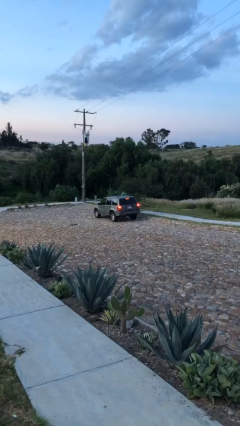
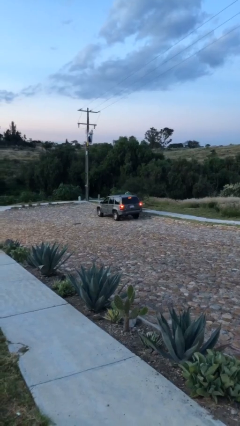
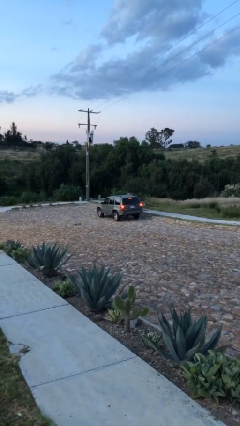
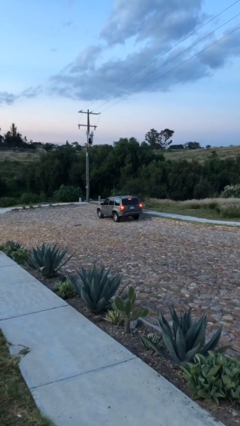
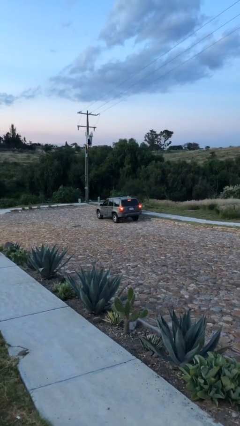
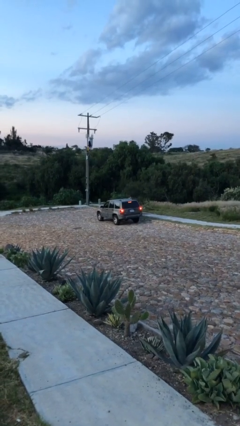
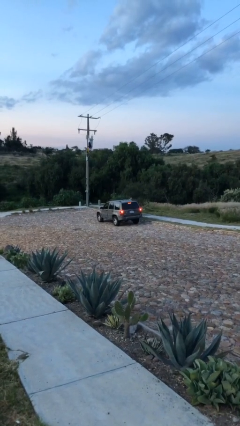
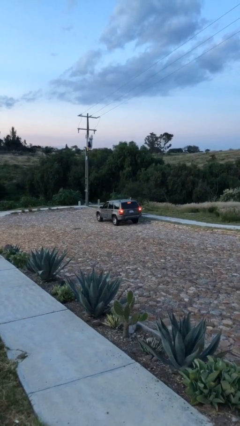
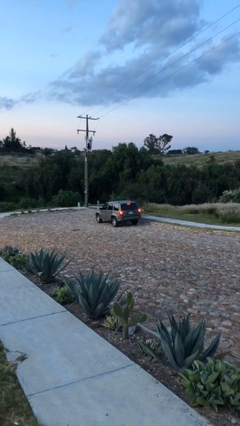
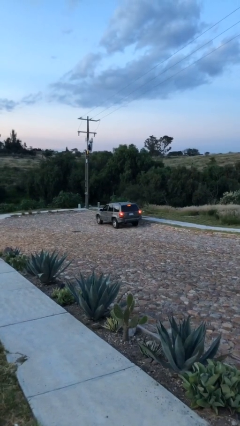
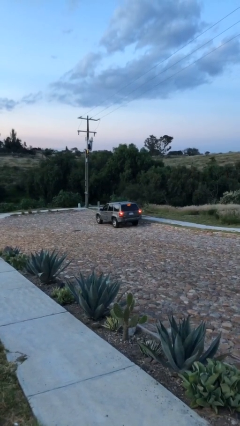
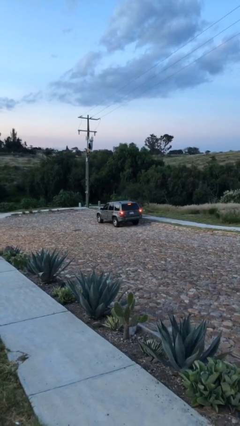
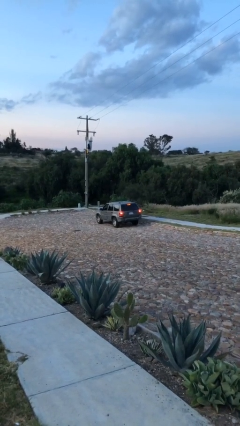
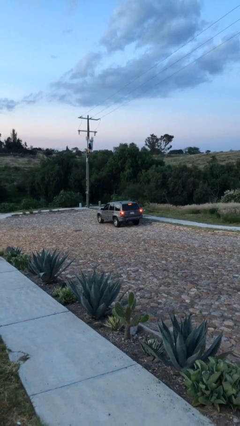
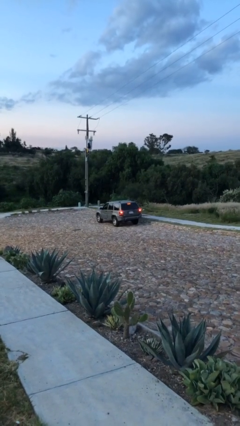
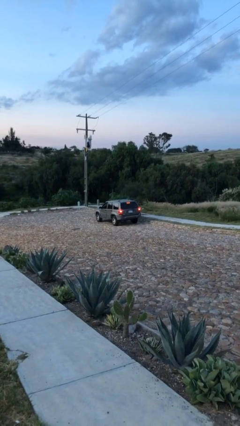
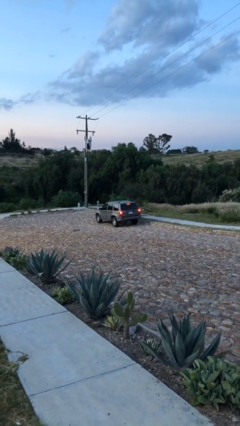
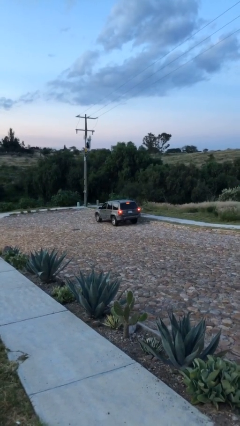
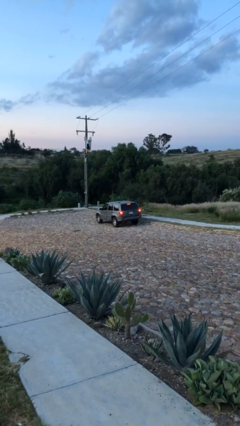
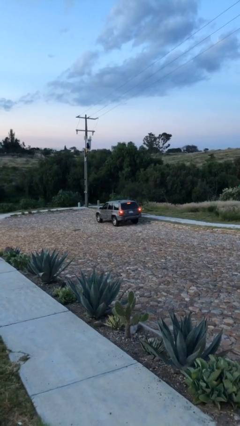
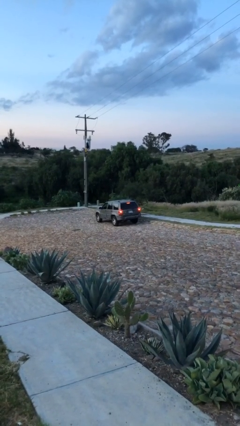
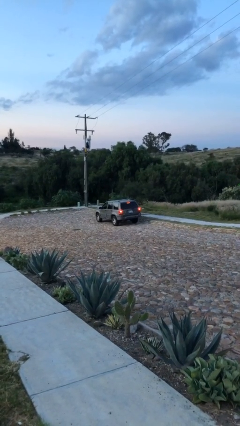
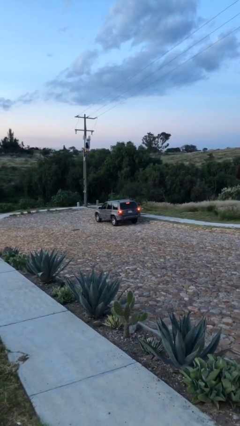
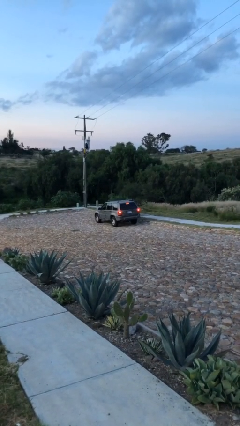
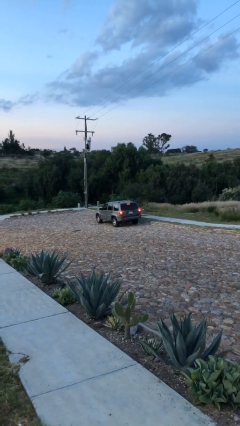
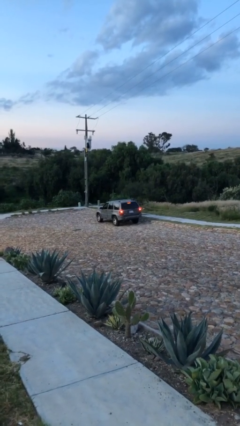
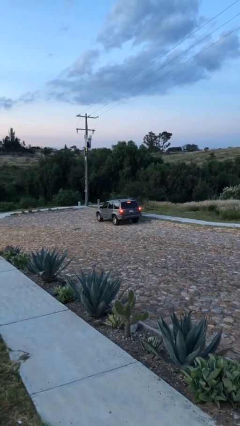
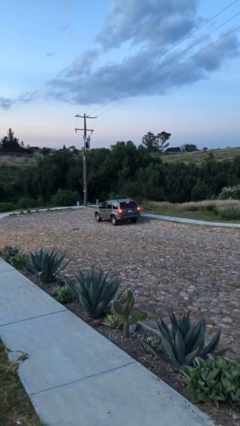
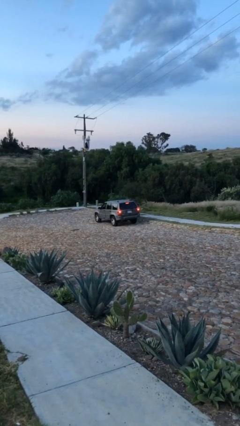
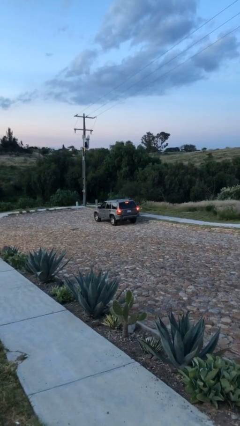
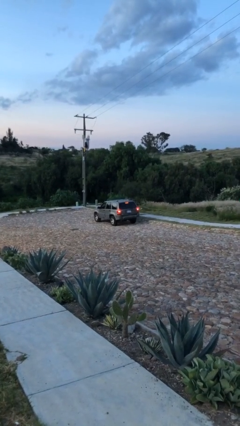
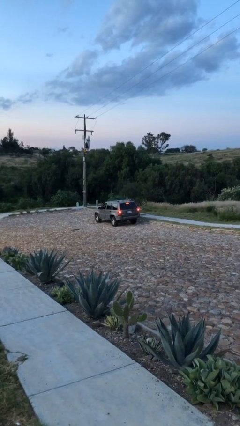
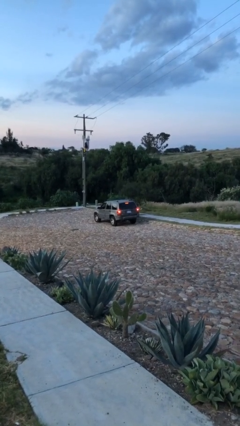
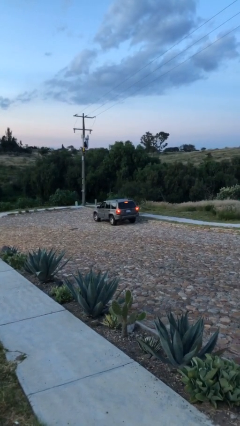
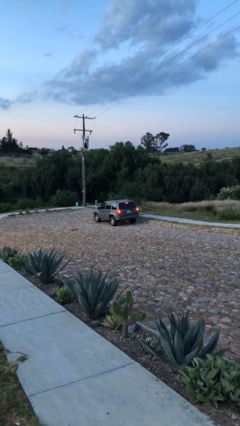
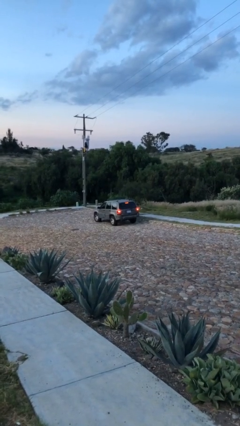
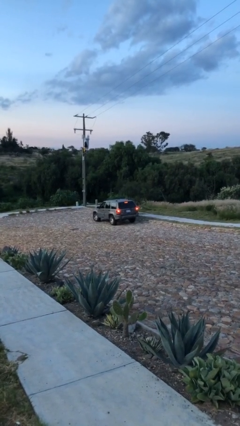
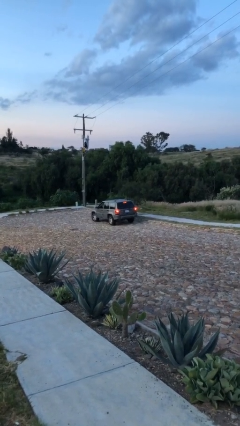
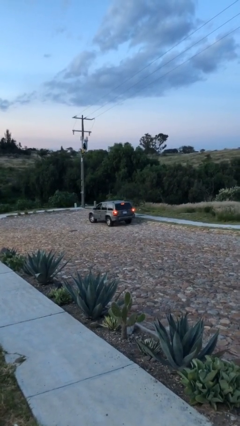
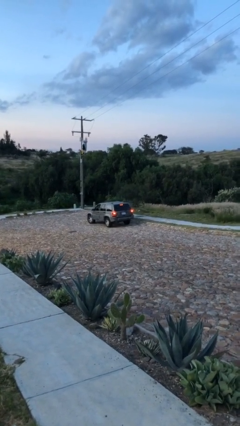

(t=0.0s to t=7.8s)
car picks up person

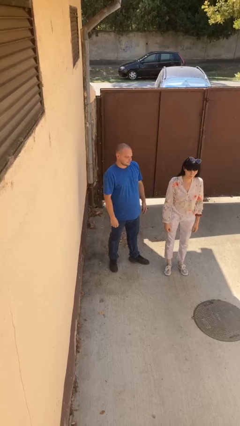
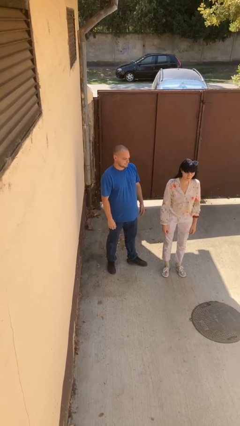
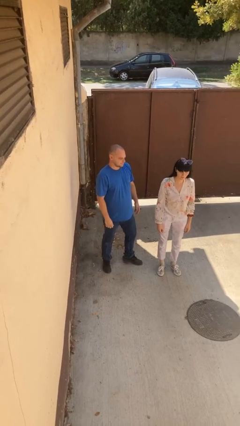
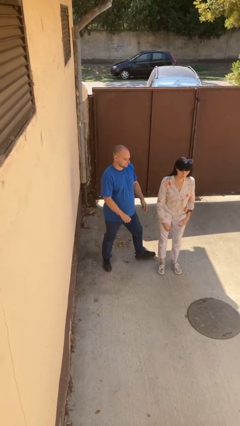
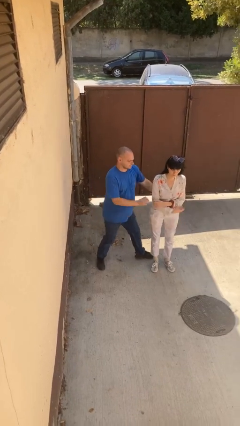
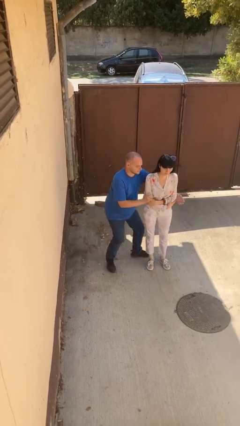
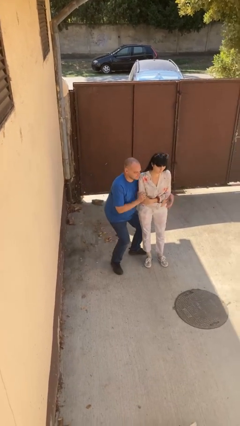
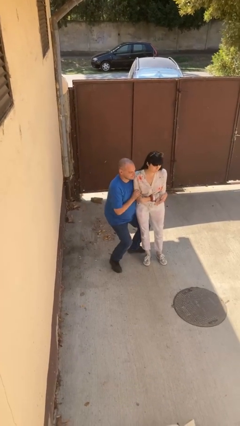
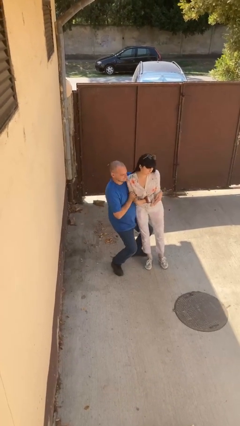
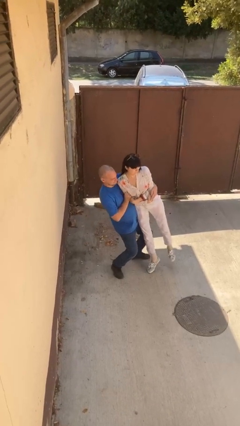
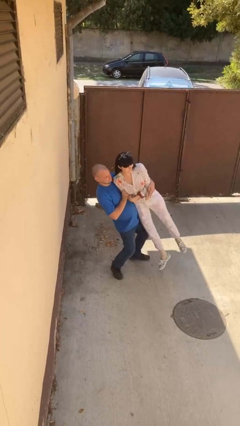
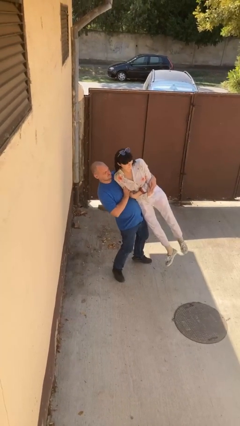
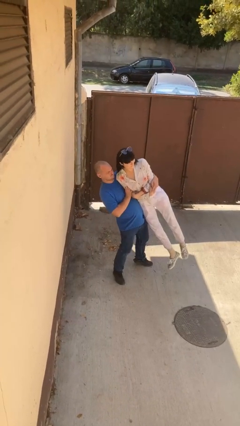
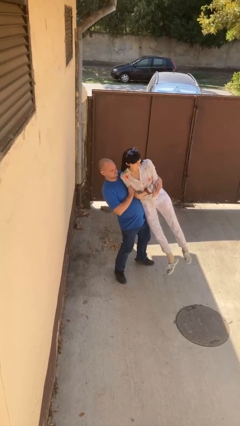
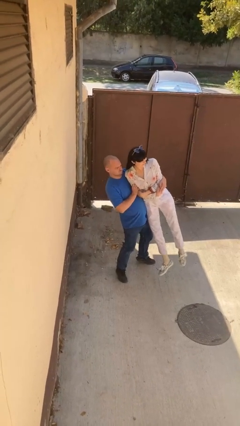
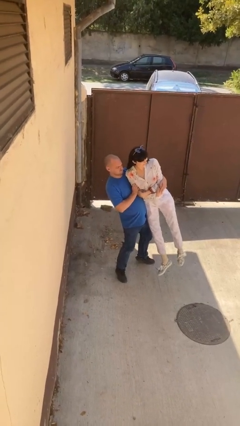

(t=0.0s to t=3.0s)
person picks up person

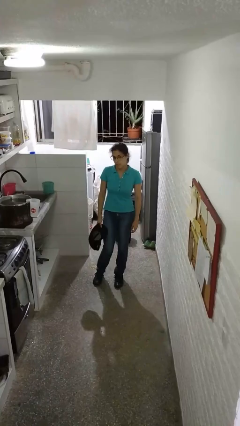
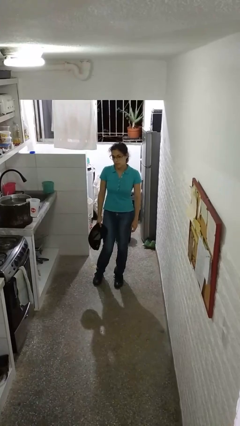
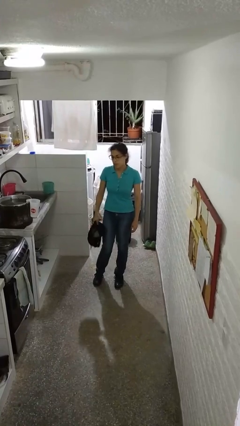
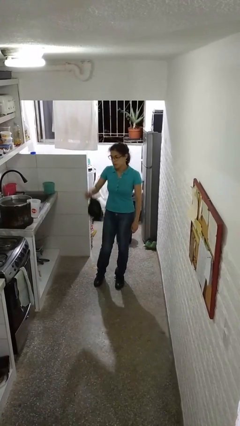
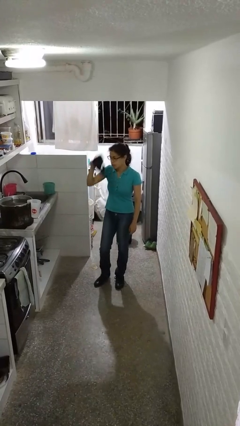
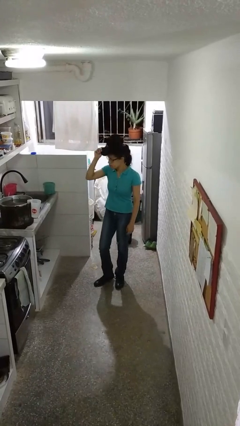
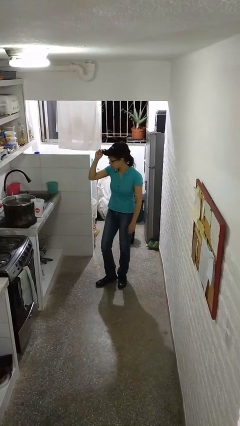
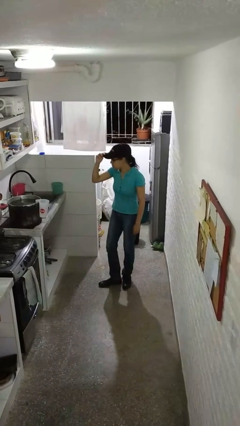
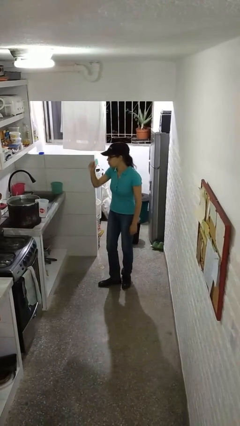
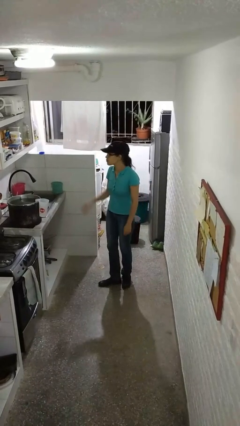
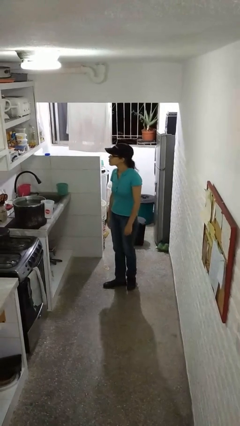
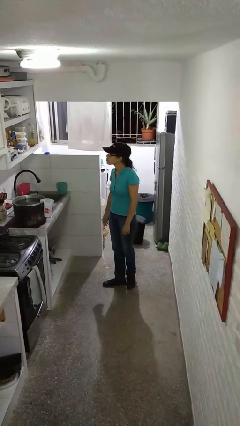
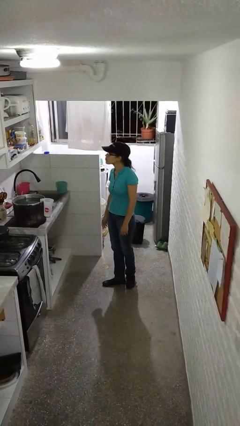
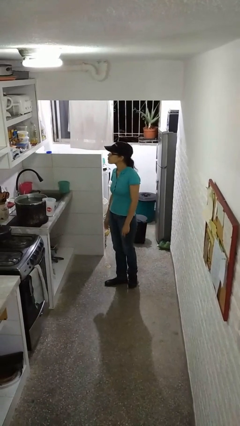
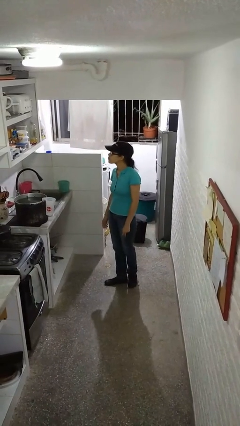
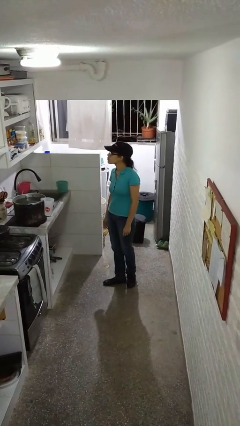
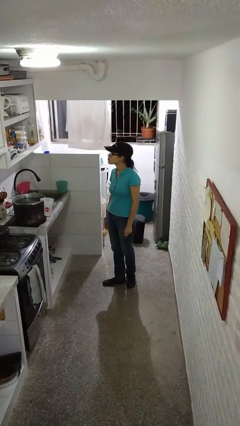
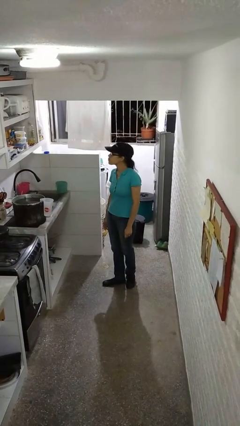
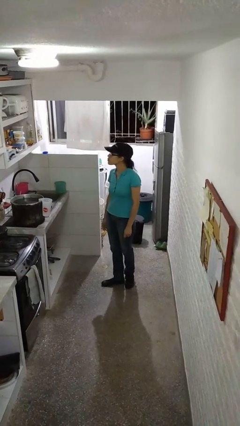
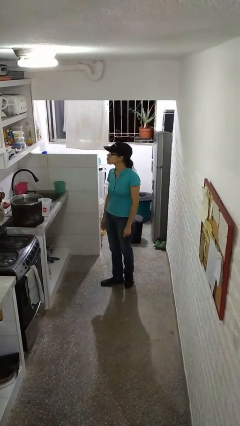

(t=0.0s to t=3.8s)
person puts on hat

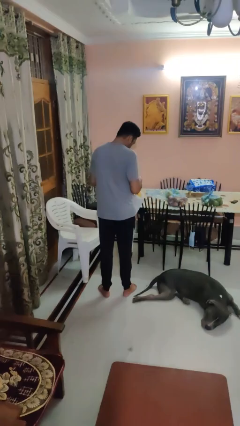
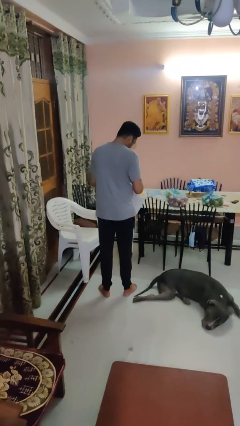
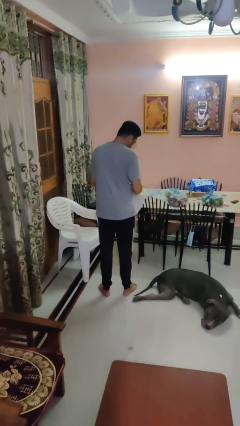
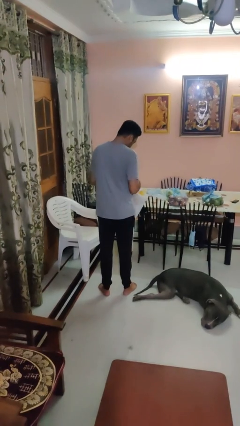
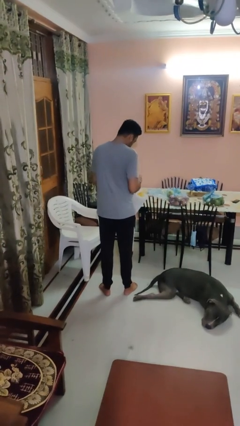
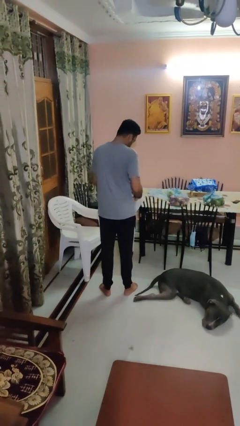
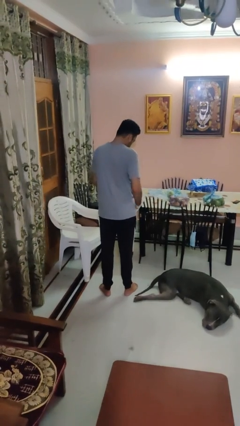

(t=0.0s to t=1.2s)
person puts object into bag

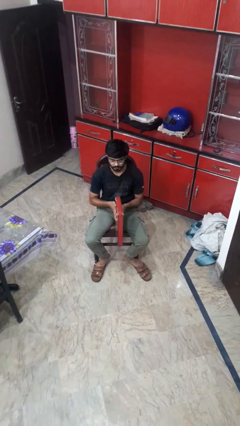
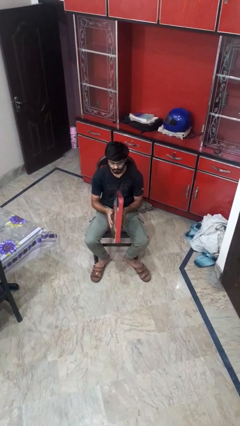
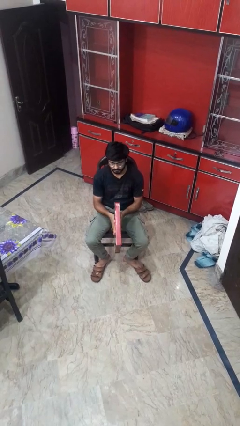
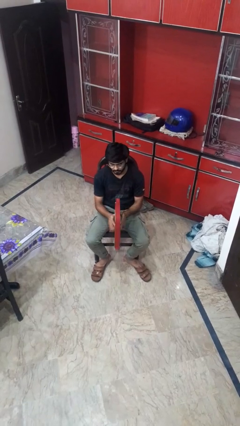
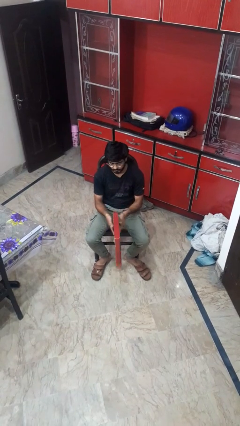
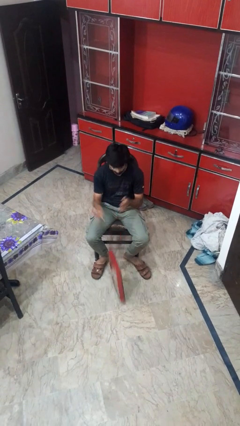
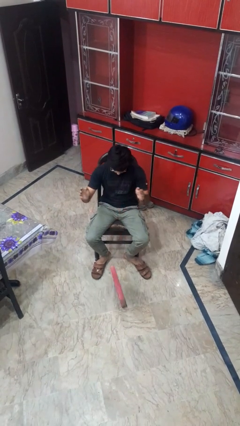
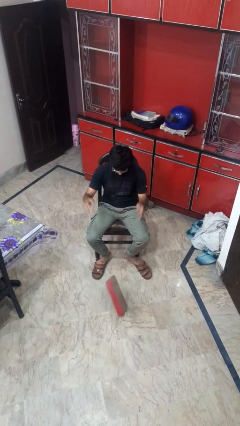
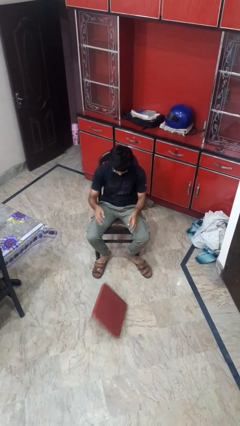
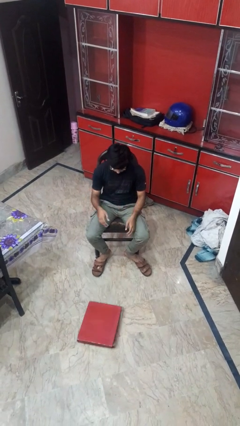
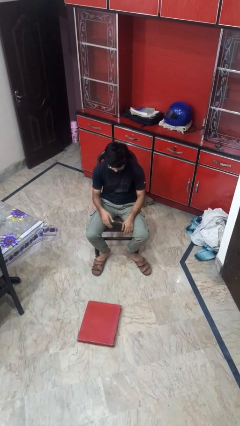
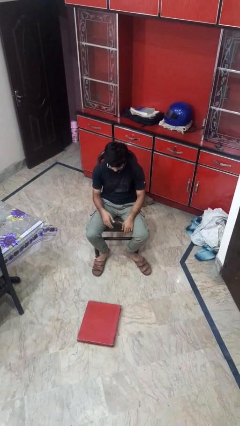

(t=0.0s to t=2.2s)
person drops object
